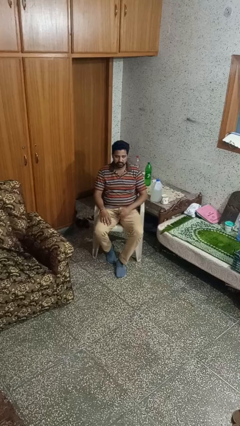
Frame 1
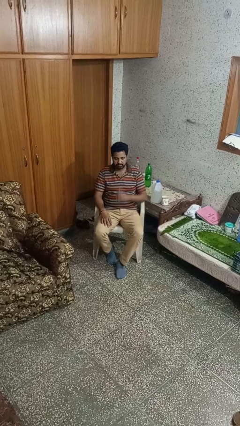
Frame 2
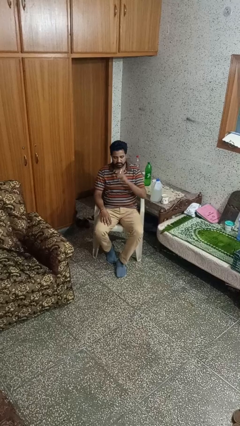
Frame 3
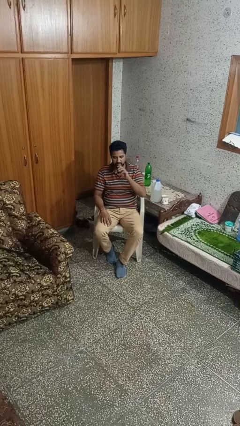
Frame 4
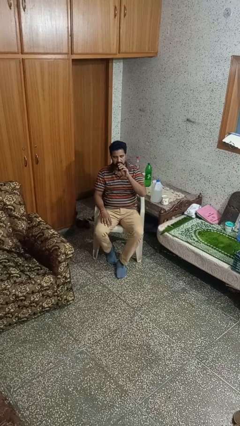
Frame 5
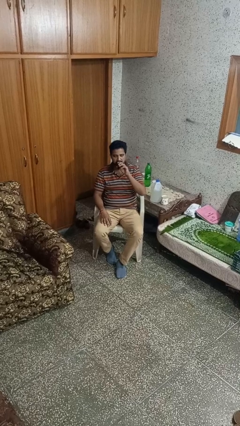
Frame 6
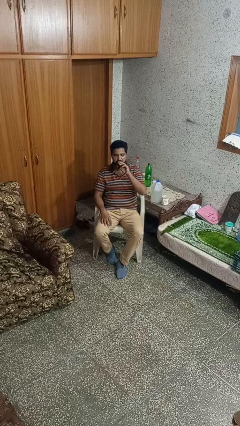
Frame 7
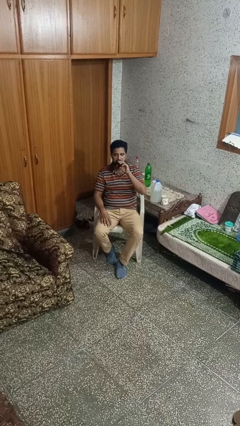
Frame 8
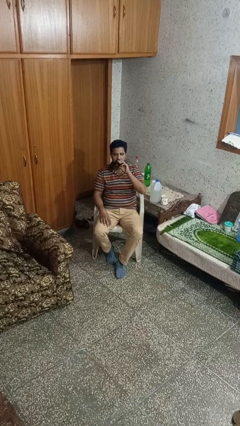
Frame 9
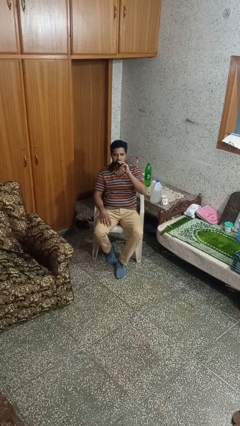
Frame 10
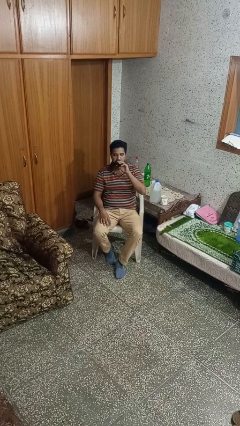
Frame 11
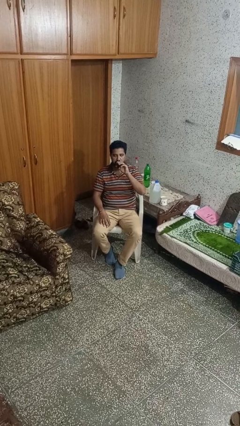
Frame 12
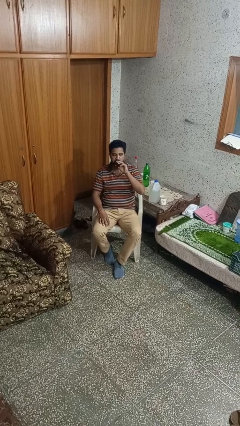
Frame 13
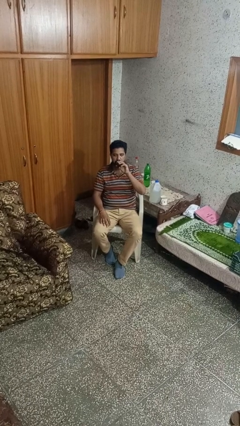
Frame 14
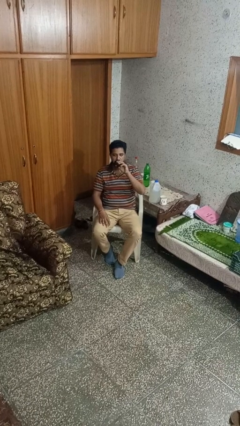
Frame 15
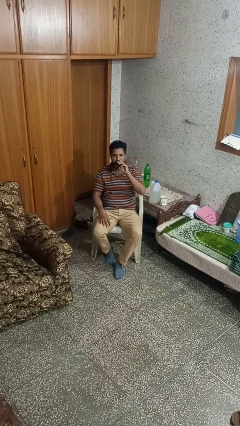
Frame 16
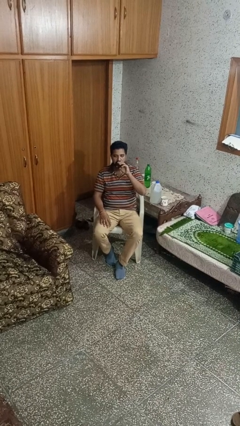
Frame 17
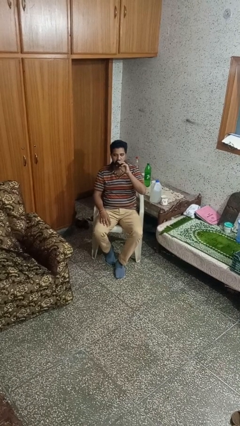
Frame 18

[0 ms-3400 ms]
person vapes

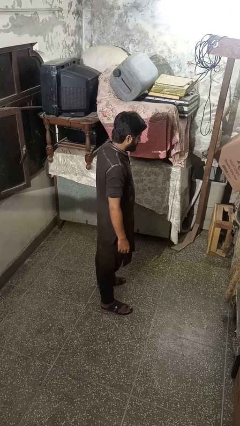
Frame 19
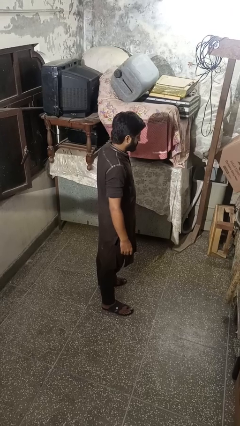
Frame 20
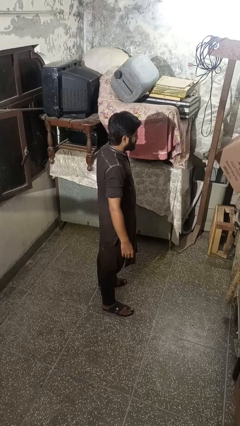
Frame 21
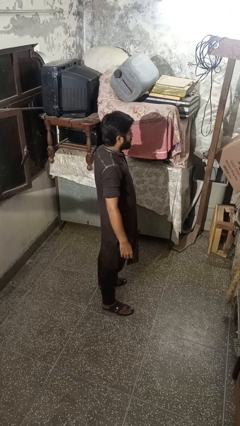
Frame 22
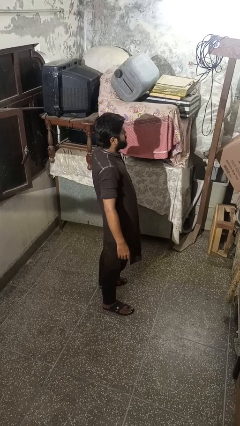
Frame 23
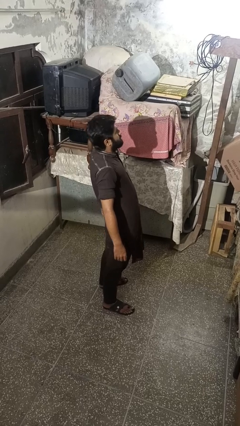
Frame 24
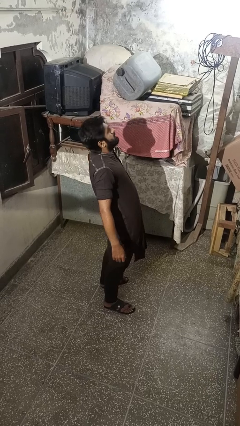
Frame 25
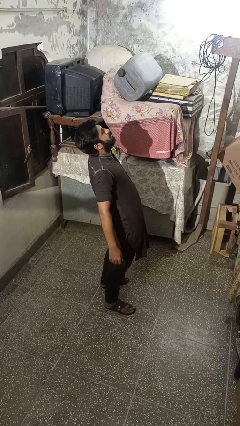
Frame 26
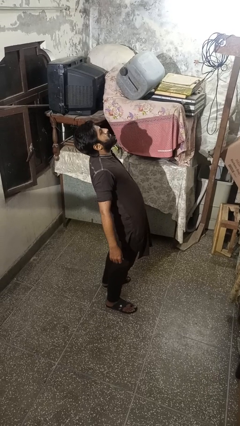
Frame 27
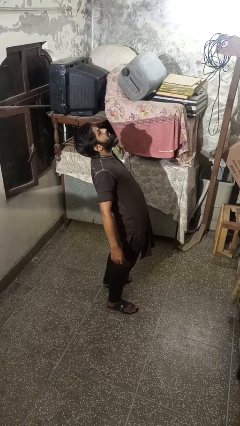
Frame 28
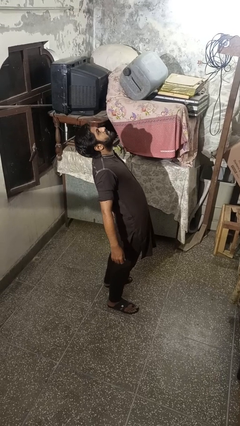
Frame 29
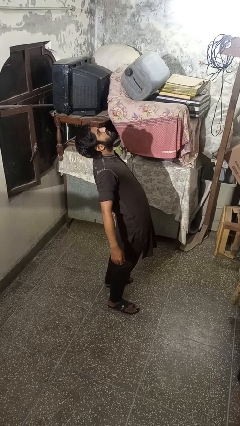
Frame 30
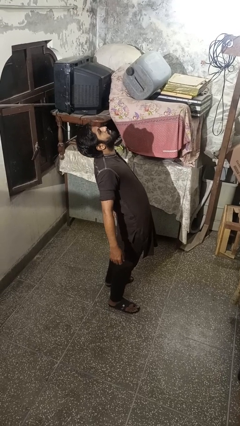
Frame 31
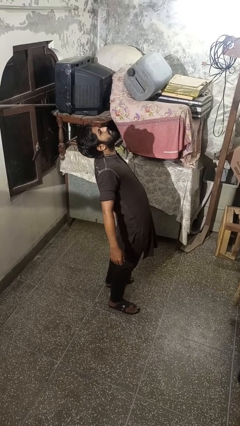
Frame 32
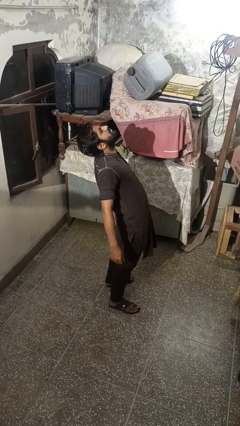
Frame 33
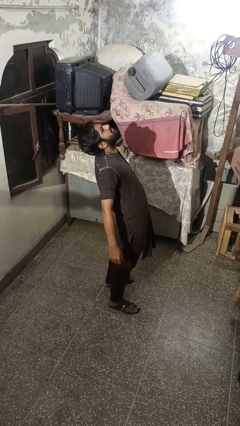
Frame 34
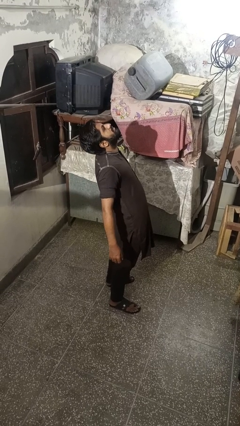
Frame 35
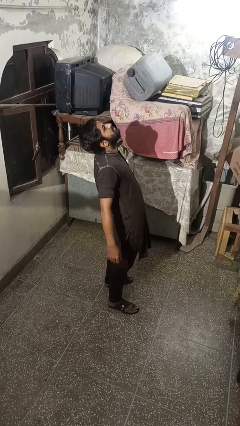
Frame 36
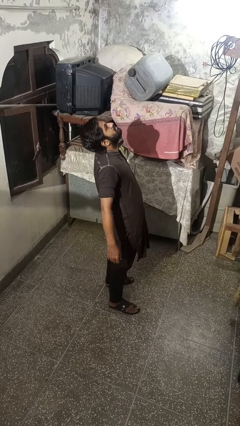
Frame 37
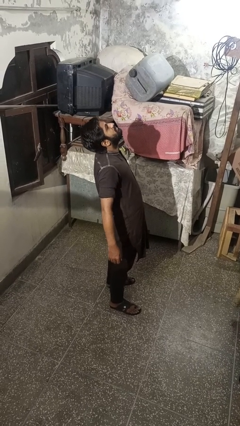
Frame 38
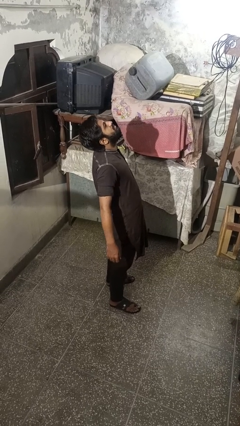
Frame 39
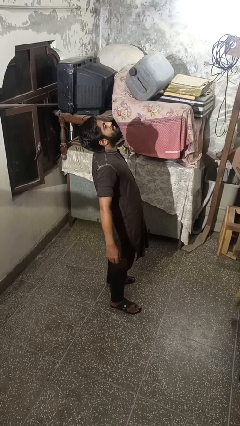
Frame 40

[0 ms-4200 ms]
person stretches back

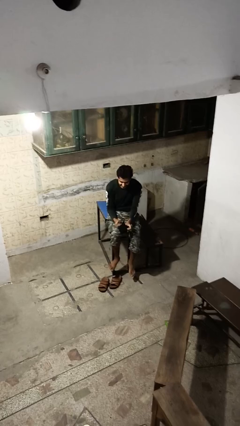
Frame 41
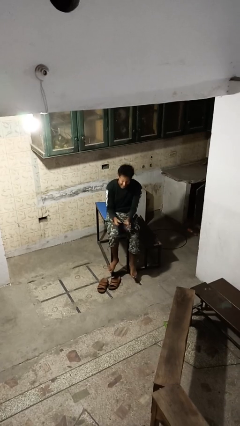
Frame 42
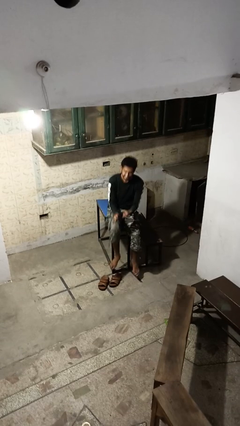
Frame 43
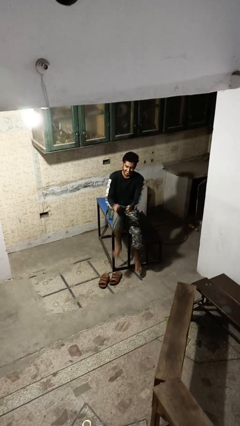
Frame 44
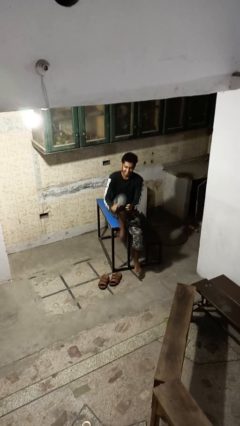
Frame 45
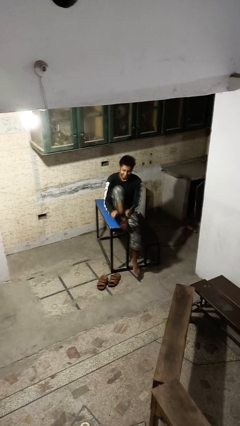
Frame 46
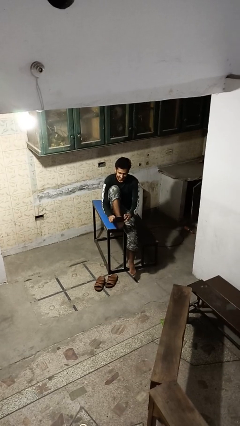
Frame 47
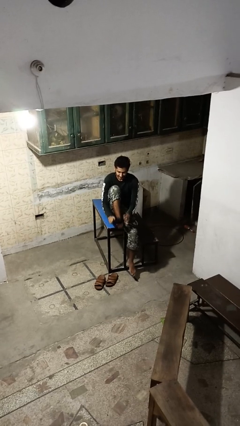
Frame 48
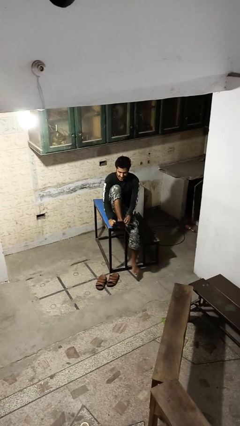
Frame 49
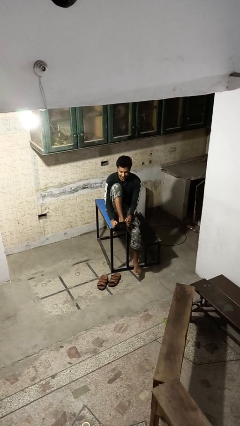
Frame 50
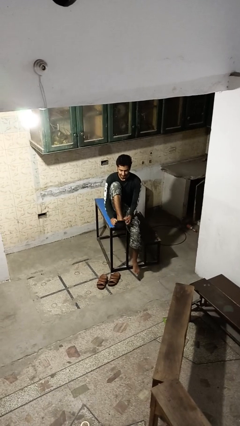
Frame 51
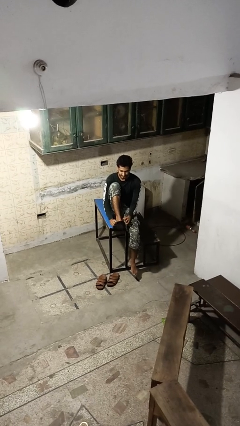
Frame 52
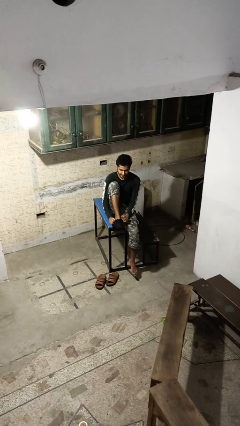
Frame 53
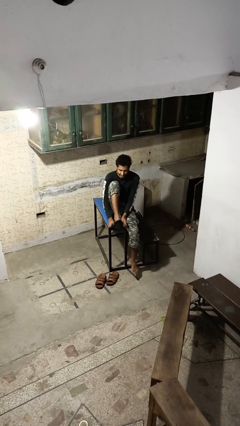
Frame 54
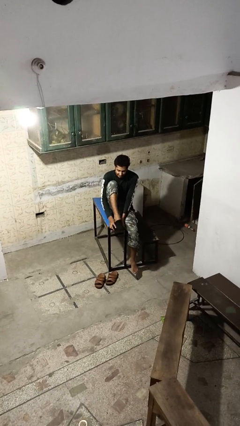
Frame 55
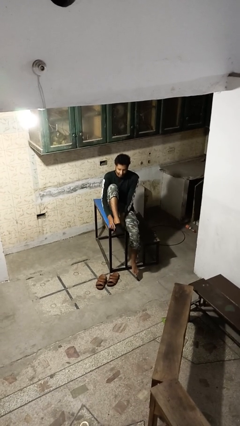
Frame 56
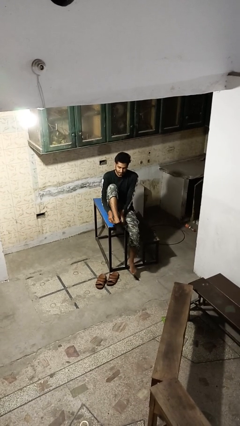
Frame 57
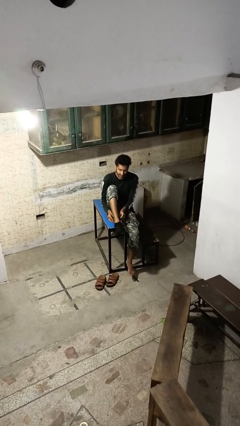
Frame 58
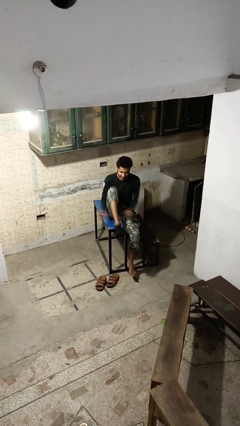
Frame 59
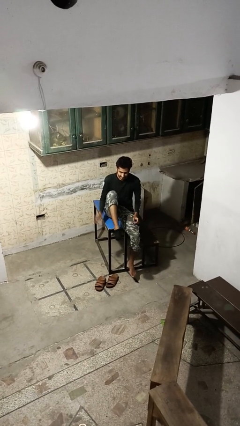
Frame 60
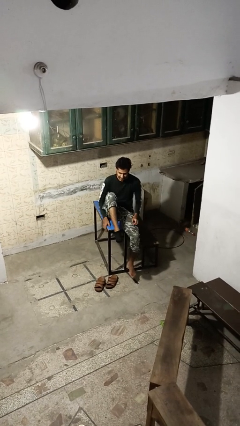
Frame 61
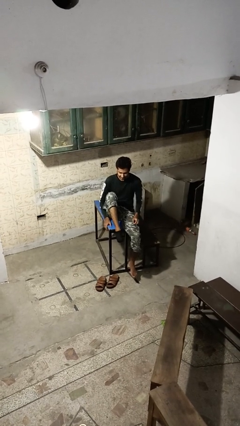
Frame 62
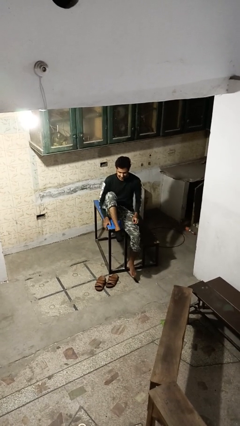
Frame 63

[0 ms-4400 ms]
person puts on socks

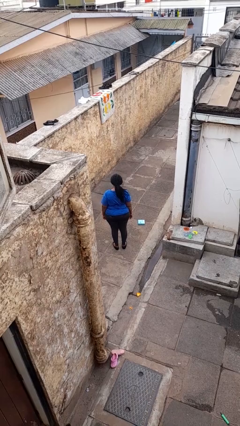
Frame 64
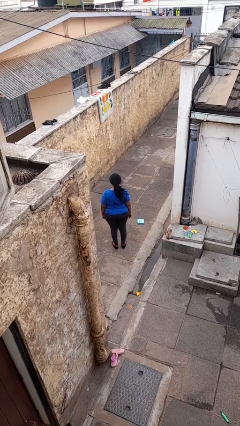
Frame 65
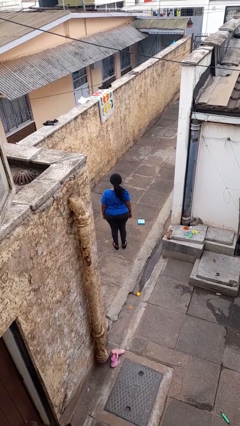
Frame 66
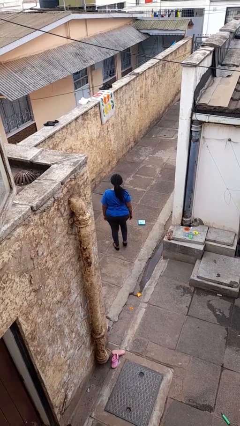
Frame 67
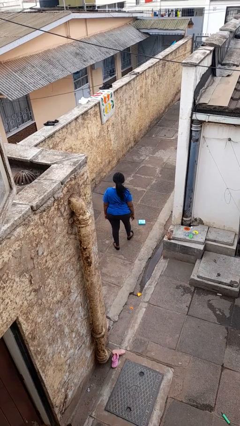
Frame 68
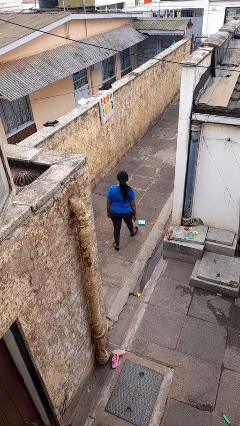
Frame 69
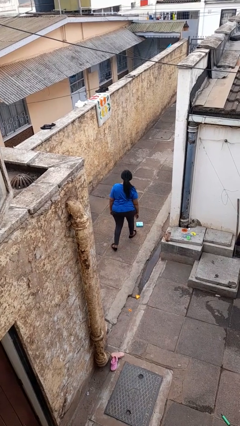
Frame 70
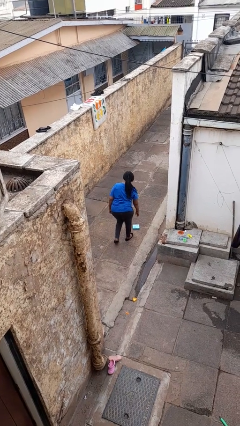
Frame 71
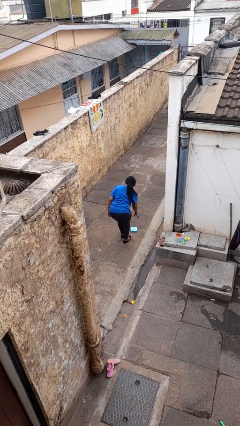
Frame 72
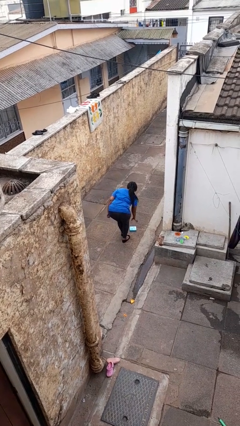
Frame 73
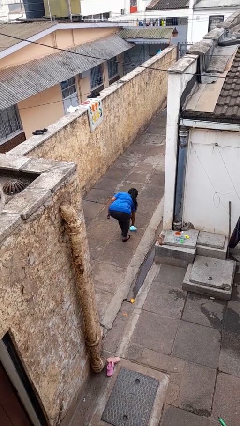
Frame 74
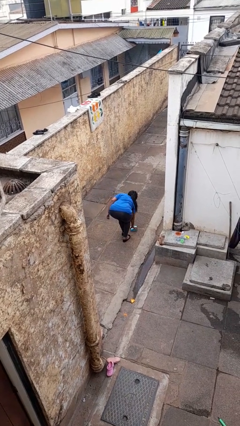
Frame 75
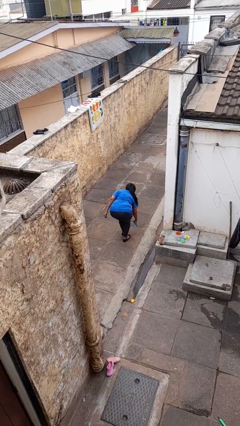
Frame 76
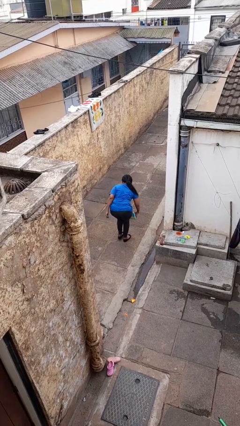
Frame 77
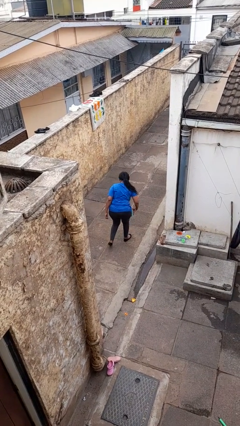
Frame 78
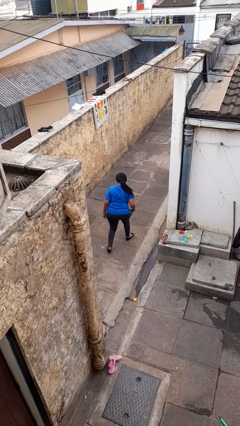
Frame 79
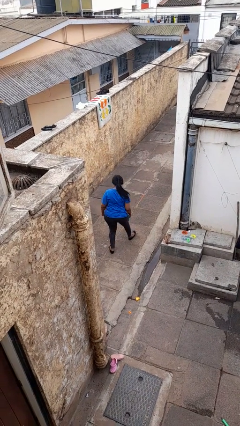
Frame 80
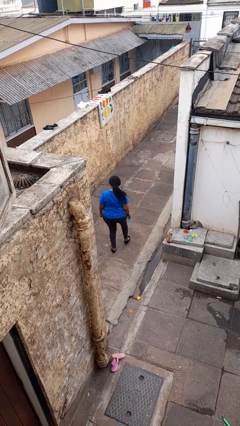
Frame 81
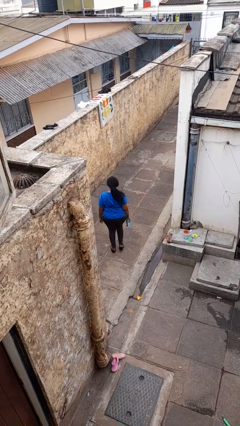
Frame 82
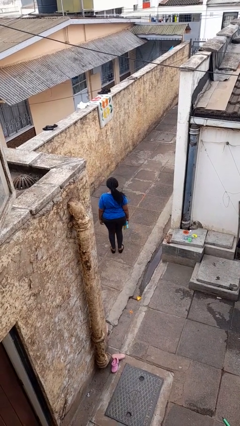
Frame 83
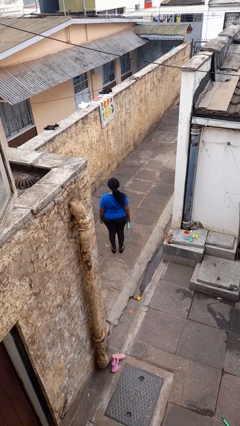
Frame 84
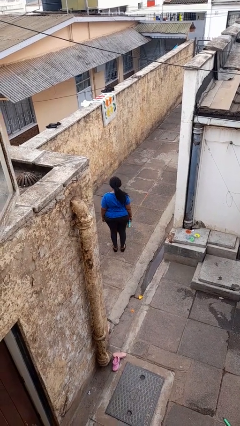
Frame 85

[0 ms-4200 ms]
person picks up object from floor

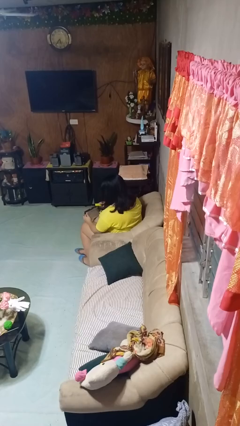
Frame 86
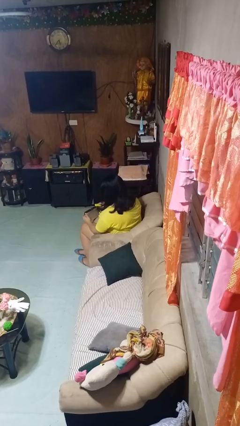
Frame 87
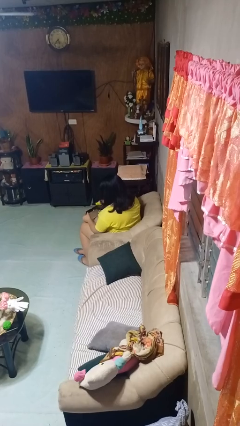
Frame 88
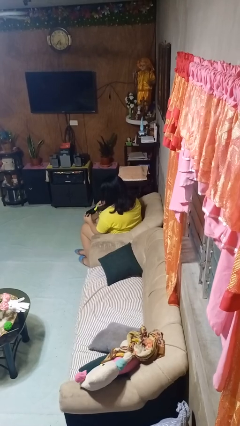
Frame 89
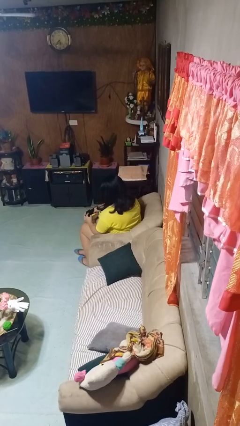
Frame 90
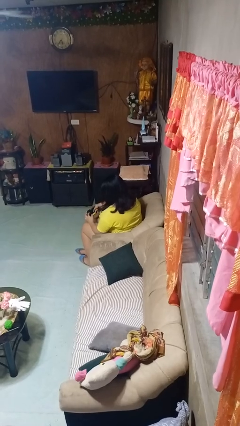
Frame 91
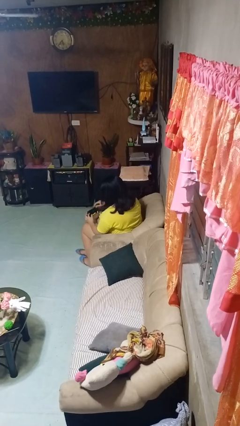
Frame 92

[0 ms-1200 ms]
person puts object into purse
